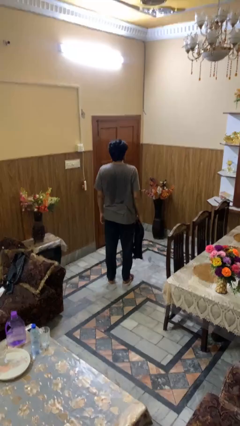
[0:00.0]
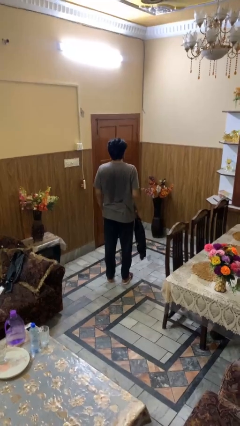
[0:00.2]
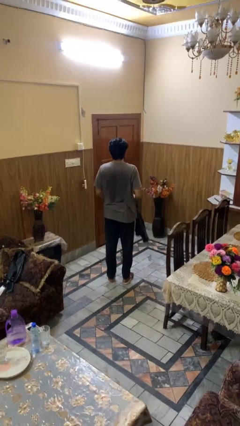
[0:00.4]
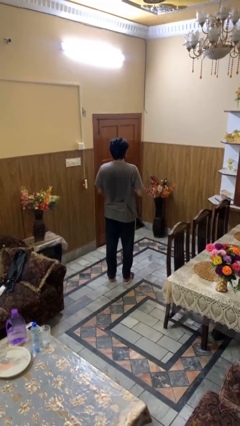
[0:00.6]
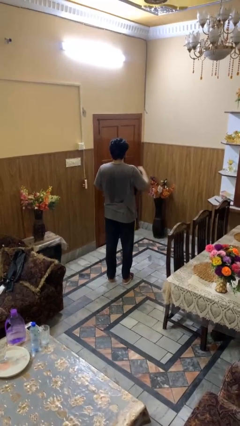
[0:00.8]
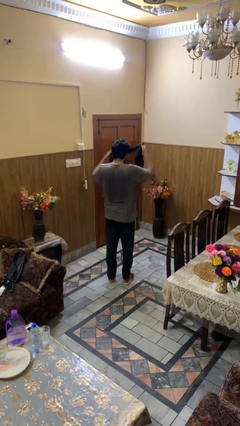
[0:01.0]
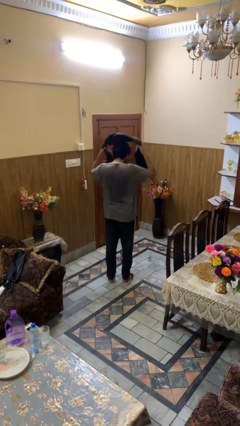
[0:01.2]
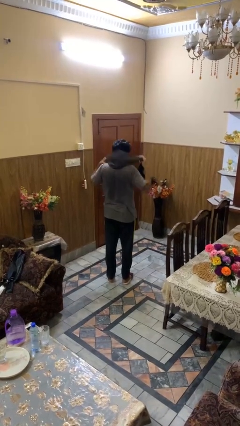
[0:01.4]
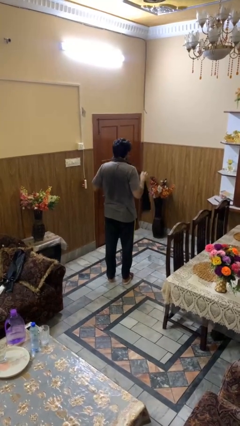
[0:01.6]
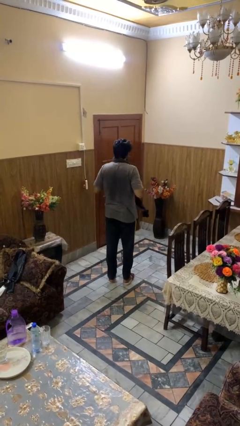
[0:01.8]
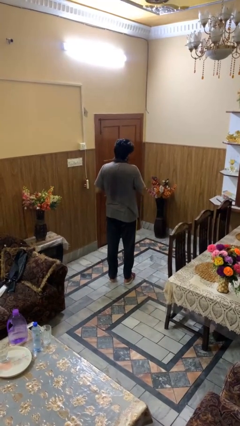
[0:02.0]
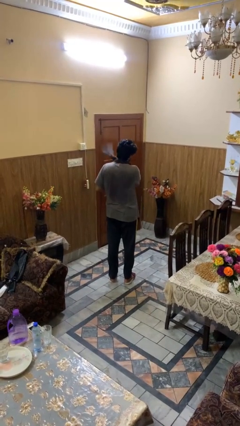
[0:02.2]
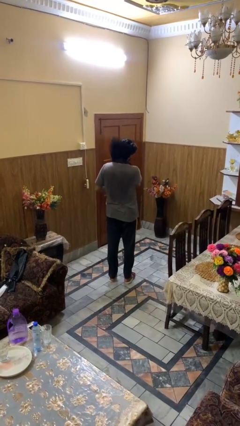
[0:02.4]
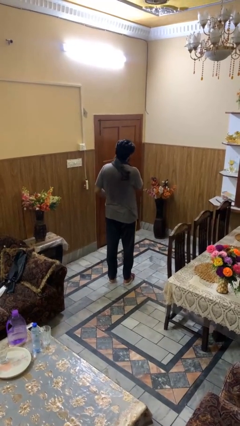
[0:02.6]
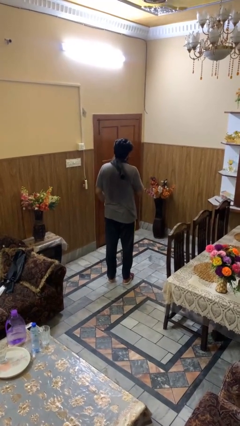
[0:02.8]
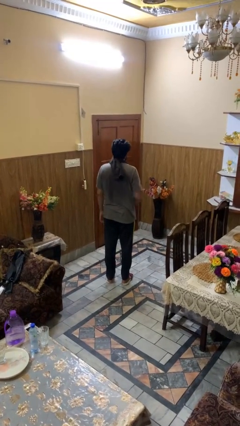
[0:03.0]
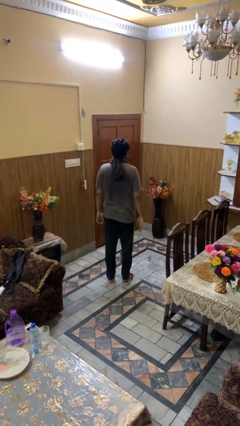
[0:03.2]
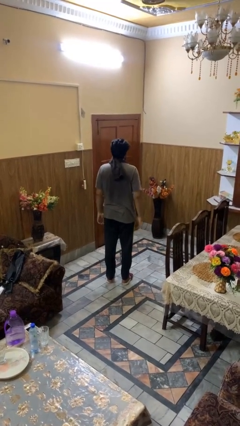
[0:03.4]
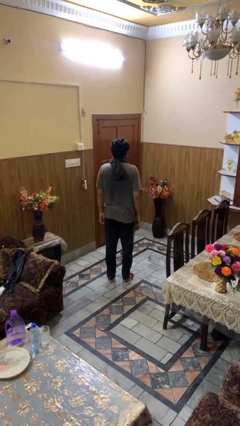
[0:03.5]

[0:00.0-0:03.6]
person puts on scarf

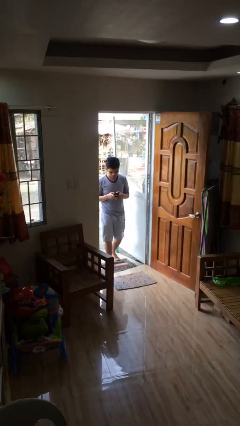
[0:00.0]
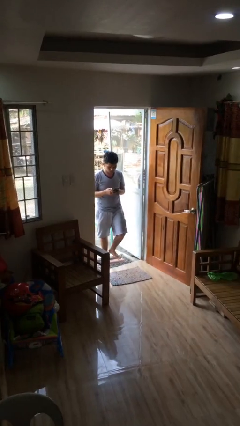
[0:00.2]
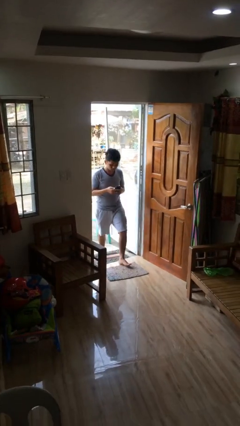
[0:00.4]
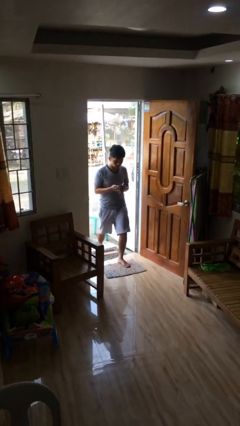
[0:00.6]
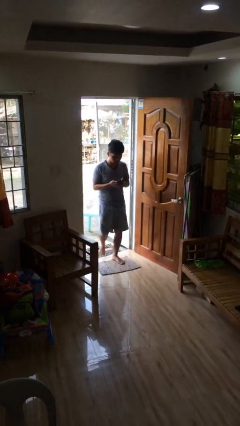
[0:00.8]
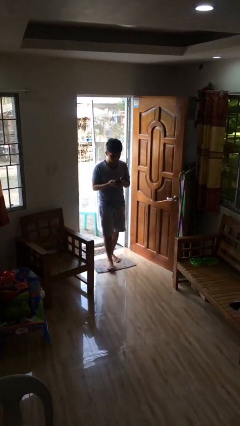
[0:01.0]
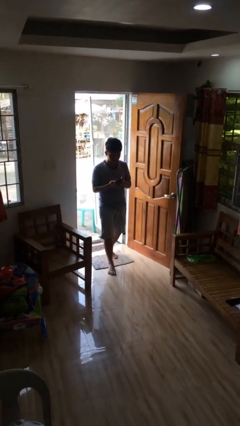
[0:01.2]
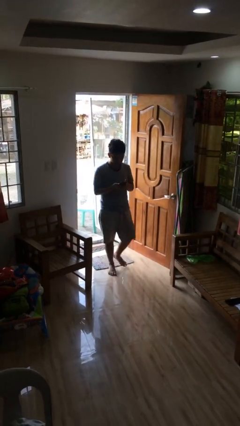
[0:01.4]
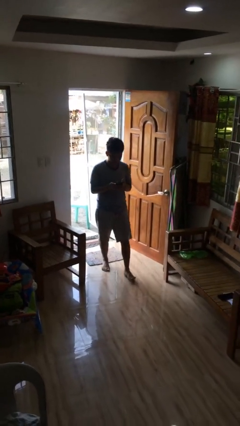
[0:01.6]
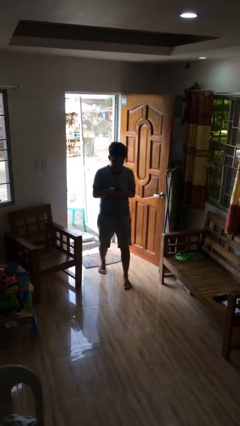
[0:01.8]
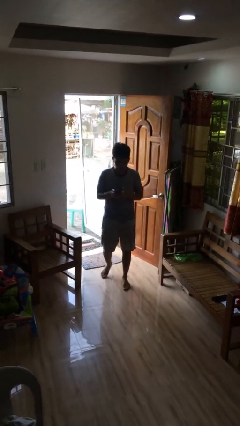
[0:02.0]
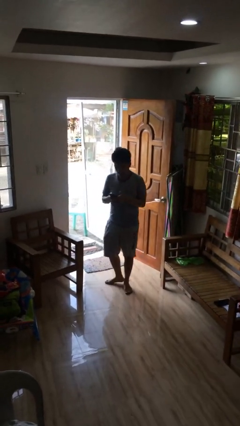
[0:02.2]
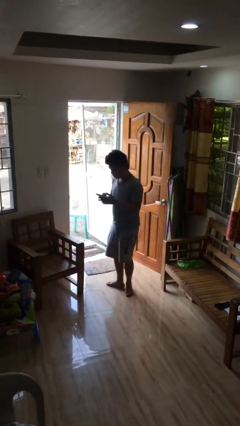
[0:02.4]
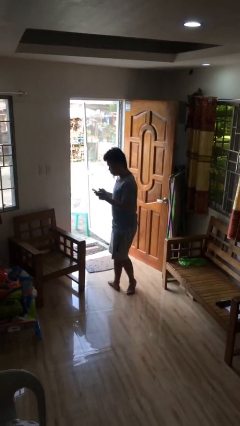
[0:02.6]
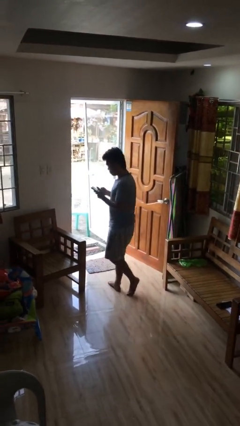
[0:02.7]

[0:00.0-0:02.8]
person enters scene through structure

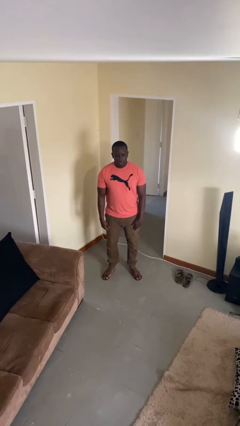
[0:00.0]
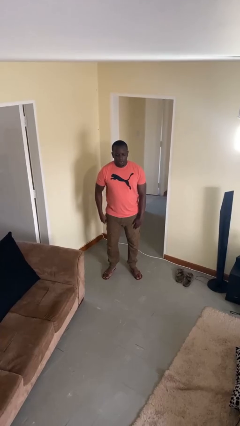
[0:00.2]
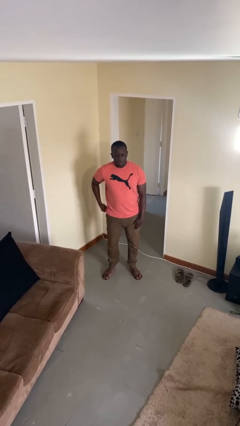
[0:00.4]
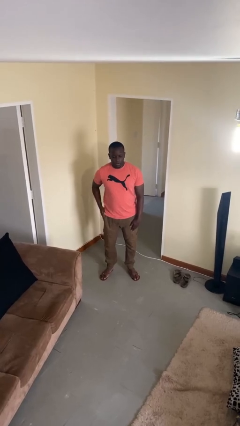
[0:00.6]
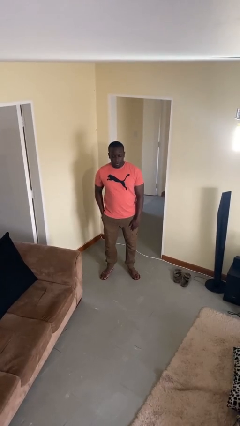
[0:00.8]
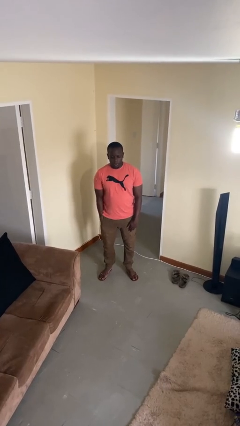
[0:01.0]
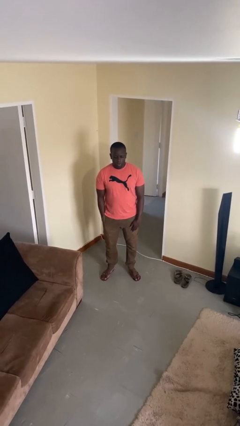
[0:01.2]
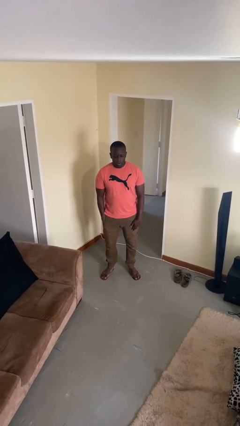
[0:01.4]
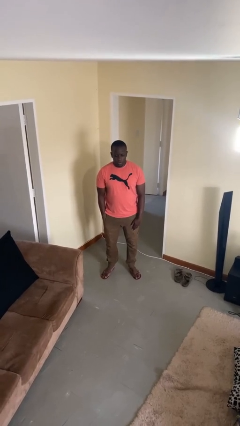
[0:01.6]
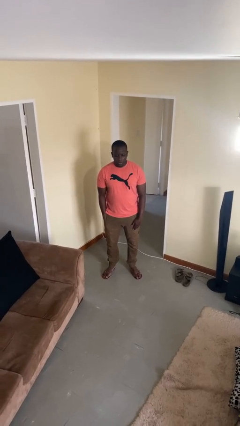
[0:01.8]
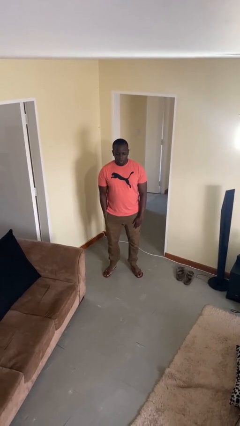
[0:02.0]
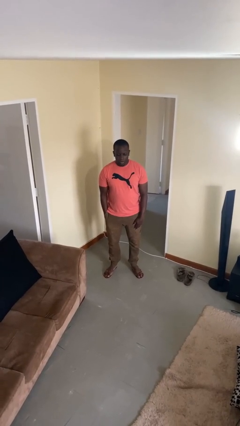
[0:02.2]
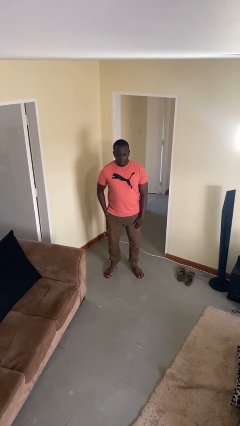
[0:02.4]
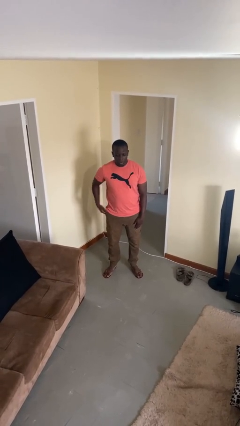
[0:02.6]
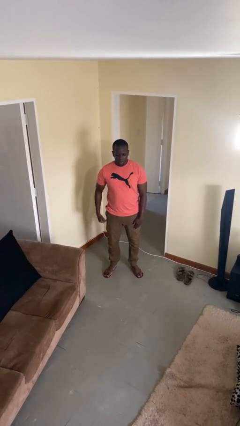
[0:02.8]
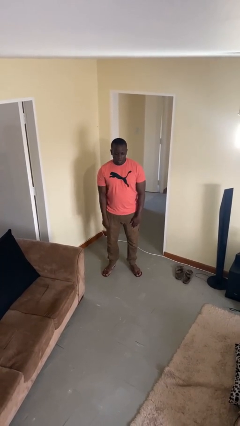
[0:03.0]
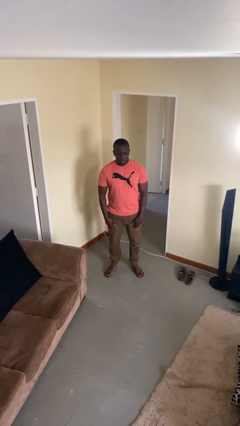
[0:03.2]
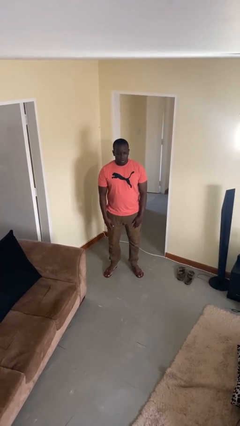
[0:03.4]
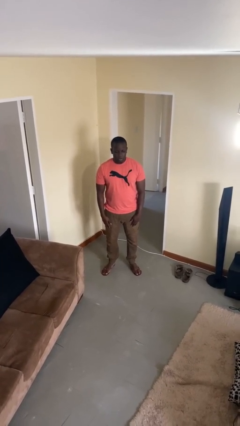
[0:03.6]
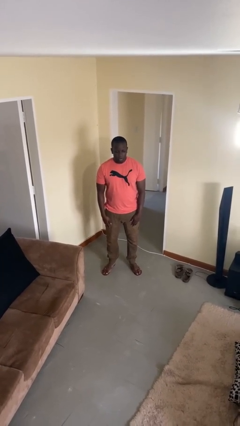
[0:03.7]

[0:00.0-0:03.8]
person puts hands in back pockets

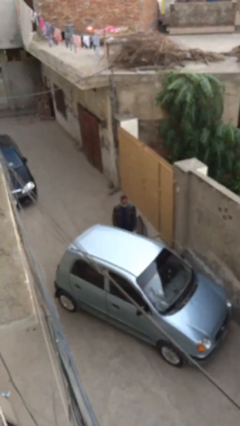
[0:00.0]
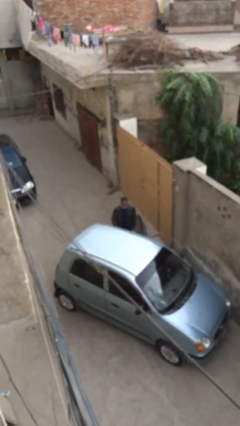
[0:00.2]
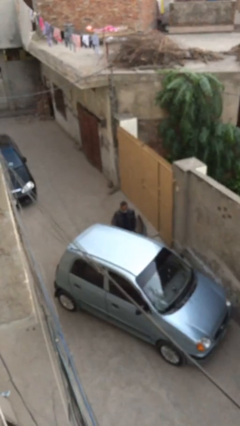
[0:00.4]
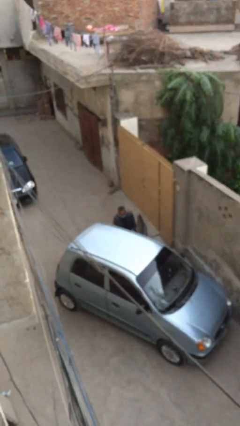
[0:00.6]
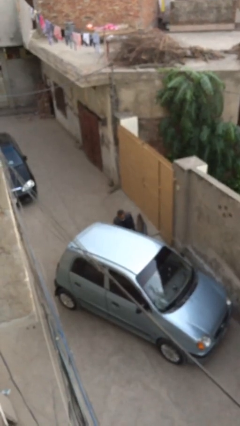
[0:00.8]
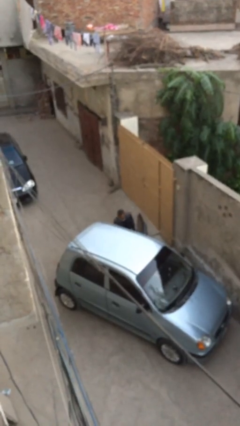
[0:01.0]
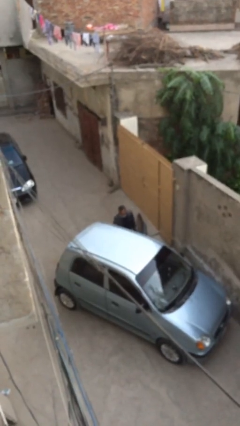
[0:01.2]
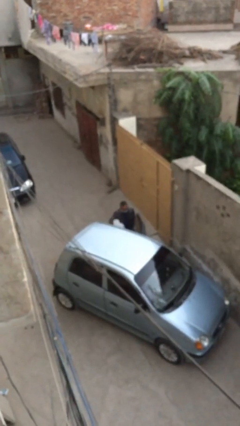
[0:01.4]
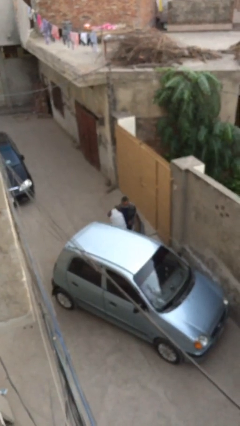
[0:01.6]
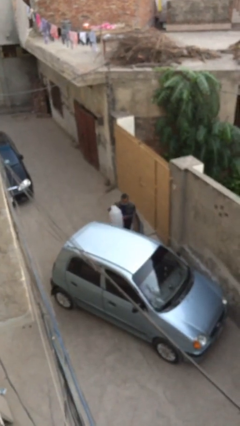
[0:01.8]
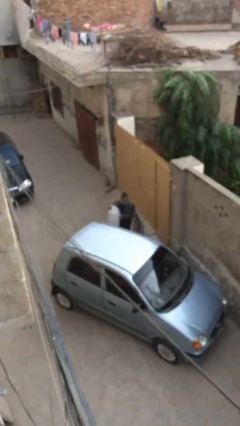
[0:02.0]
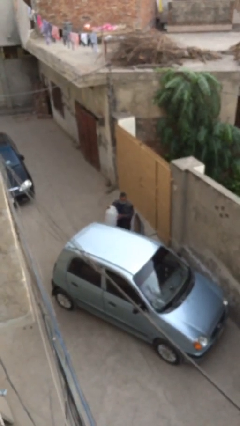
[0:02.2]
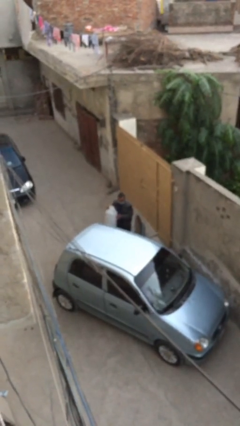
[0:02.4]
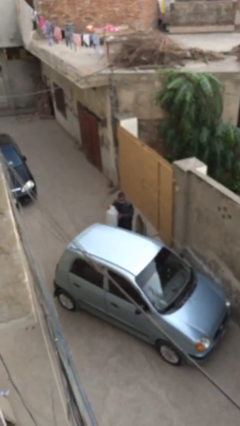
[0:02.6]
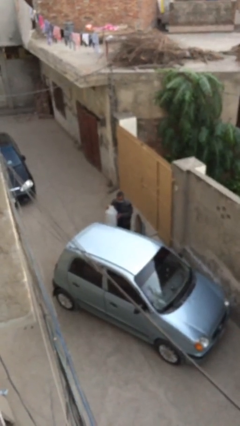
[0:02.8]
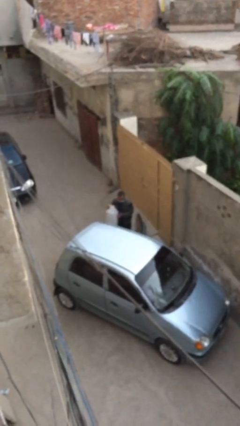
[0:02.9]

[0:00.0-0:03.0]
person unloads car

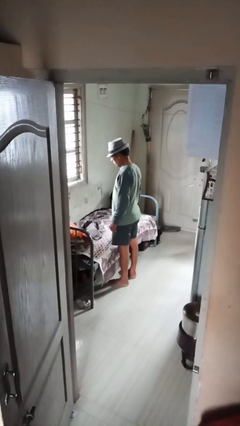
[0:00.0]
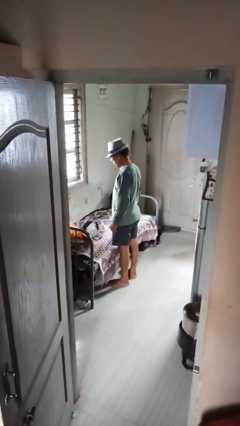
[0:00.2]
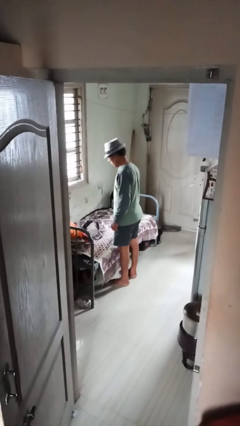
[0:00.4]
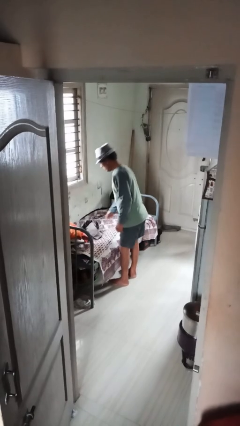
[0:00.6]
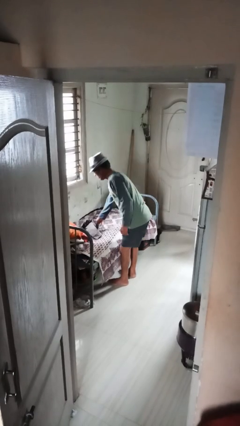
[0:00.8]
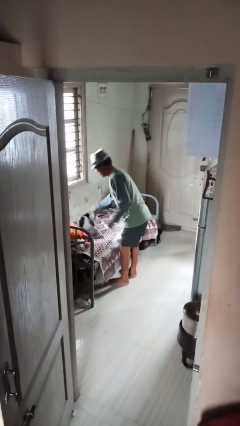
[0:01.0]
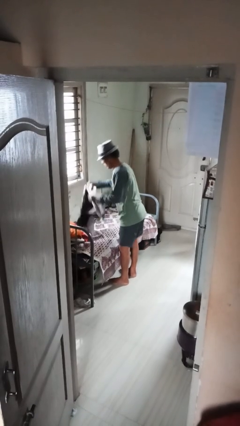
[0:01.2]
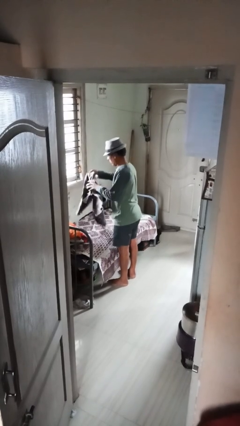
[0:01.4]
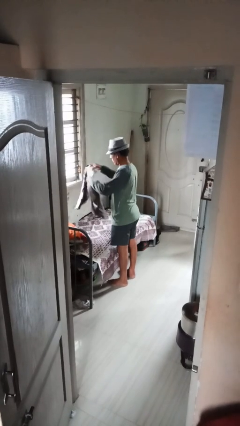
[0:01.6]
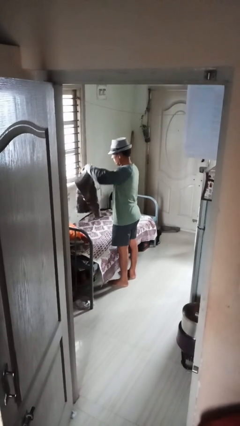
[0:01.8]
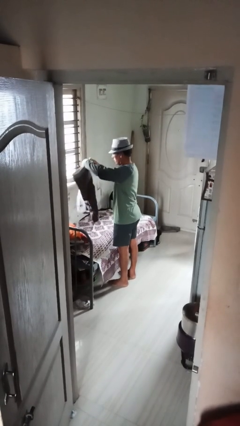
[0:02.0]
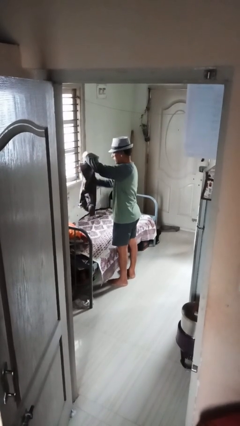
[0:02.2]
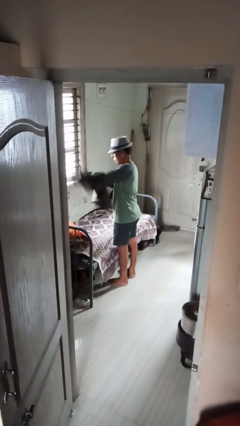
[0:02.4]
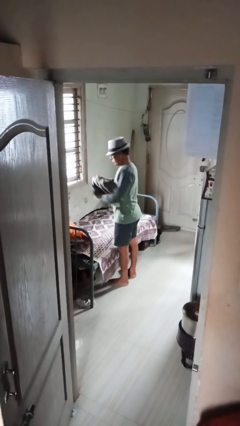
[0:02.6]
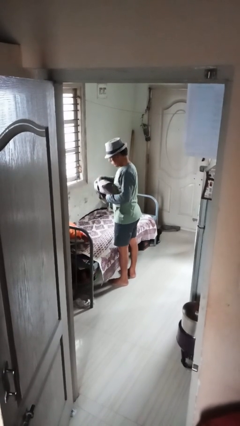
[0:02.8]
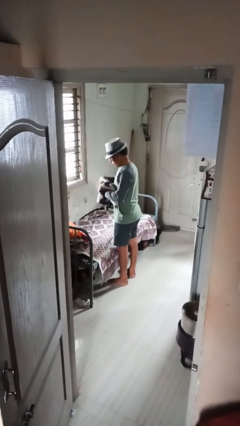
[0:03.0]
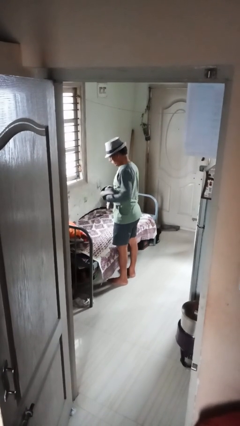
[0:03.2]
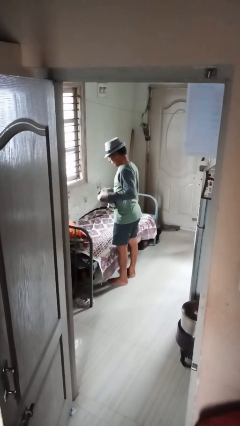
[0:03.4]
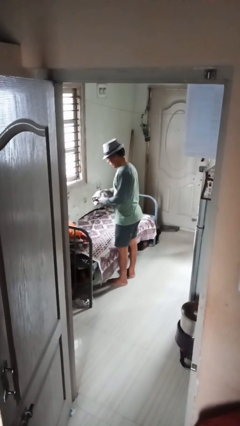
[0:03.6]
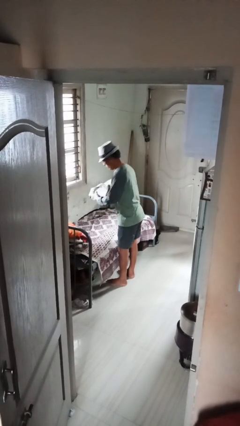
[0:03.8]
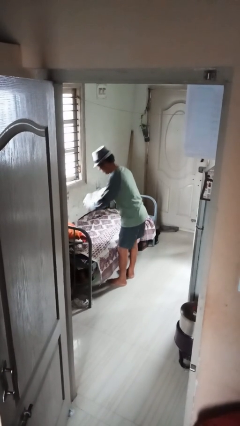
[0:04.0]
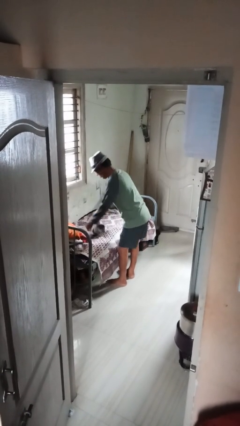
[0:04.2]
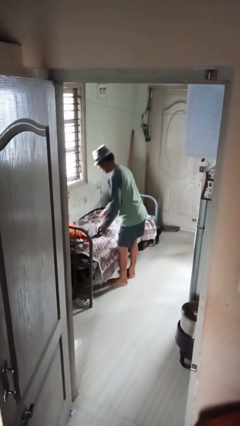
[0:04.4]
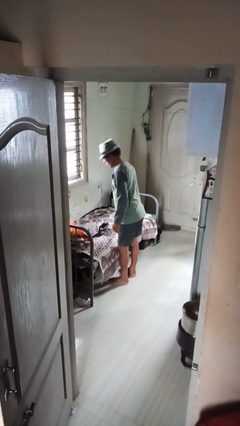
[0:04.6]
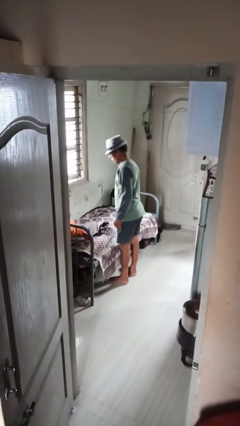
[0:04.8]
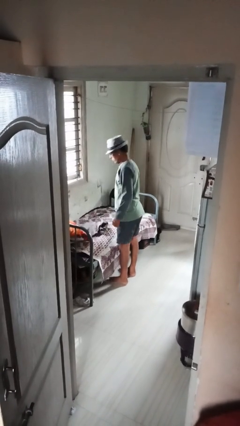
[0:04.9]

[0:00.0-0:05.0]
person folds pants
